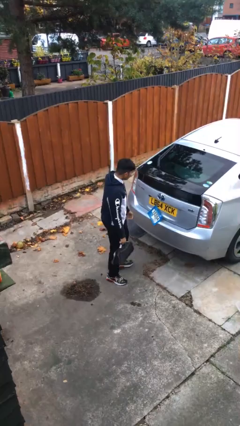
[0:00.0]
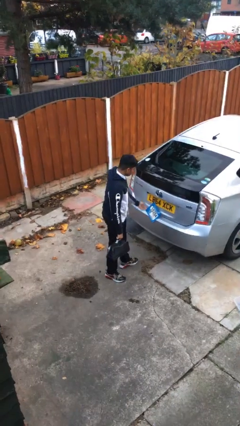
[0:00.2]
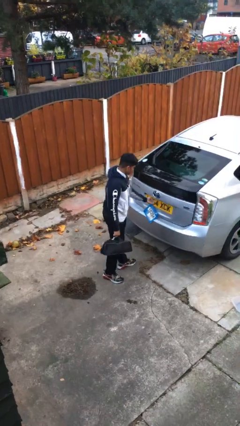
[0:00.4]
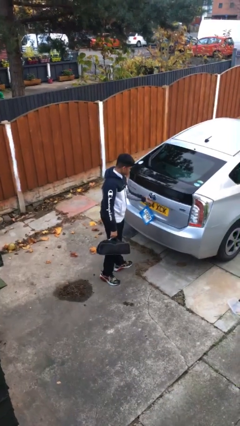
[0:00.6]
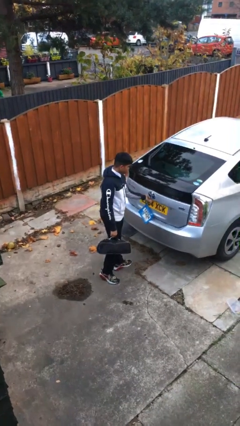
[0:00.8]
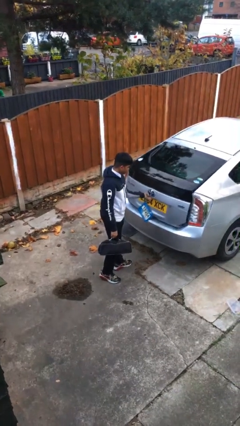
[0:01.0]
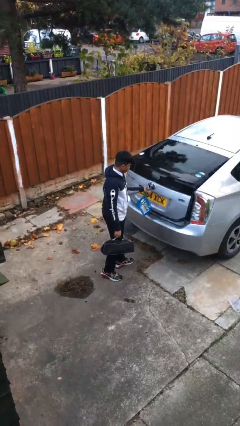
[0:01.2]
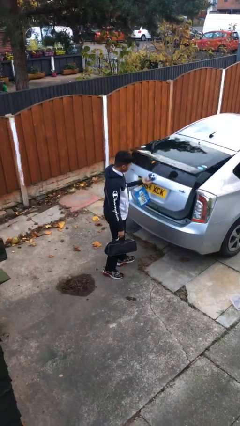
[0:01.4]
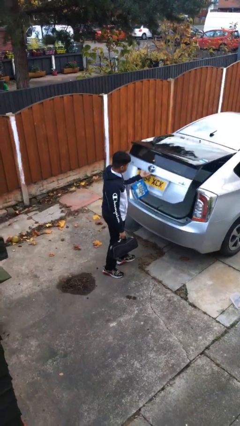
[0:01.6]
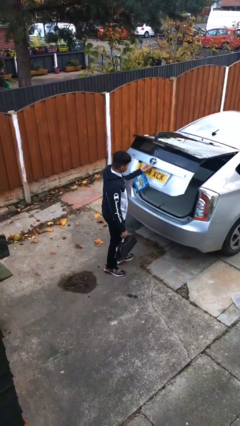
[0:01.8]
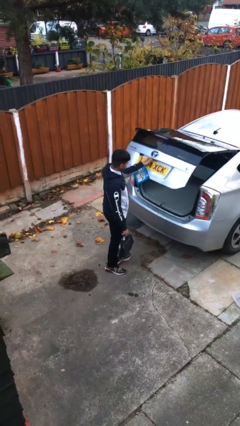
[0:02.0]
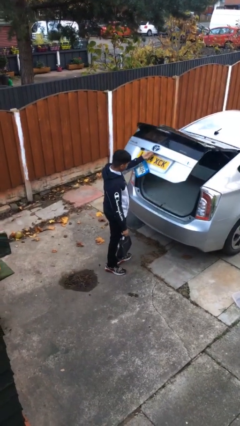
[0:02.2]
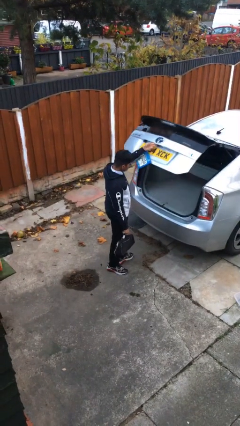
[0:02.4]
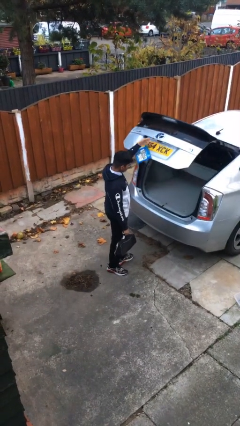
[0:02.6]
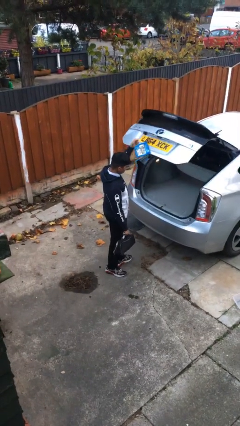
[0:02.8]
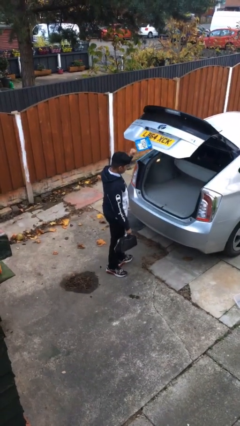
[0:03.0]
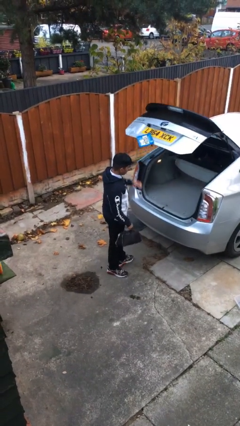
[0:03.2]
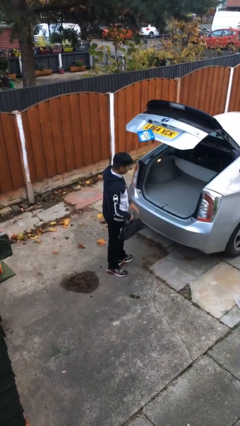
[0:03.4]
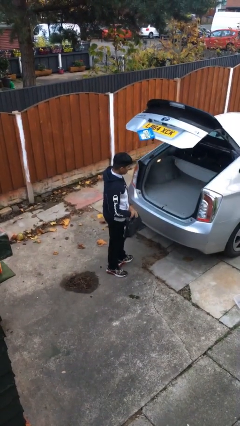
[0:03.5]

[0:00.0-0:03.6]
person opens car trunk

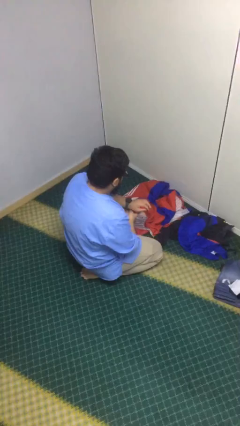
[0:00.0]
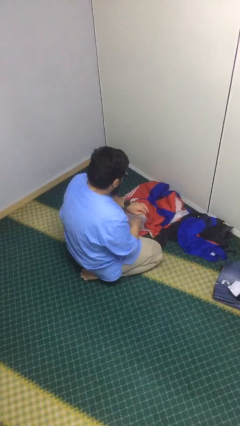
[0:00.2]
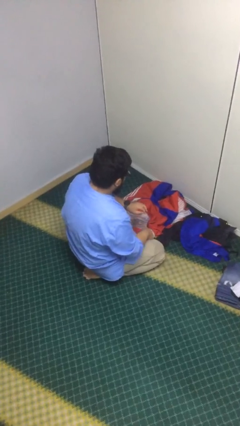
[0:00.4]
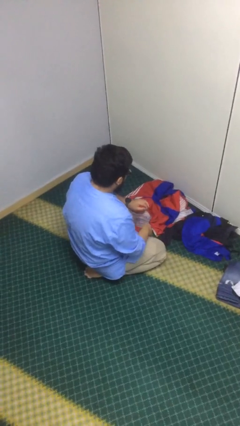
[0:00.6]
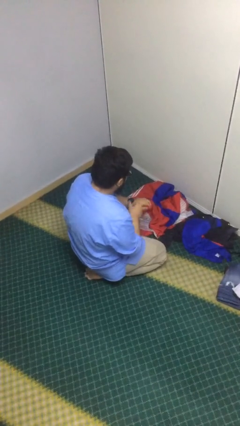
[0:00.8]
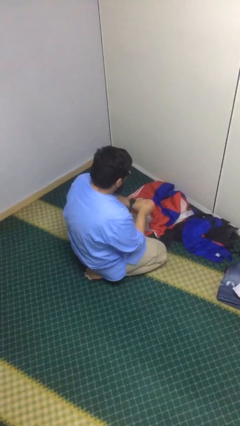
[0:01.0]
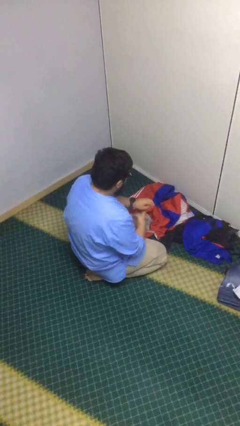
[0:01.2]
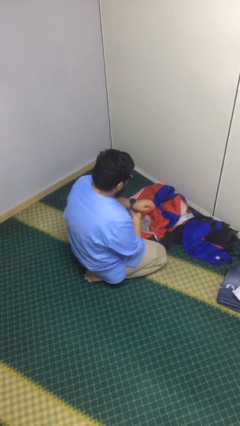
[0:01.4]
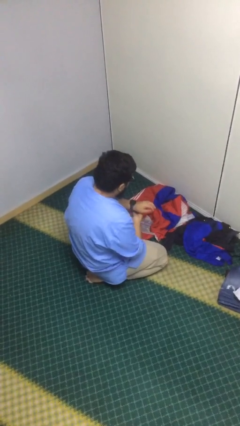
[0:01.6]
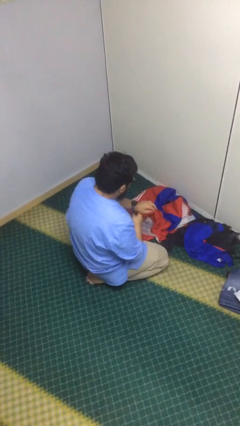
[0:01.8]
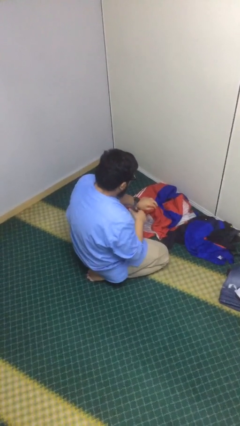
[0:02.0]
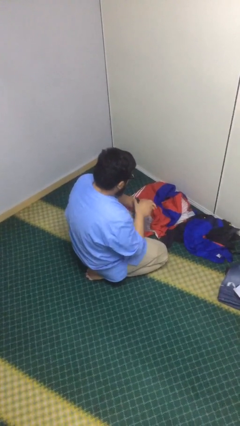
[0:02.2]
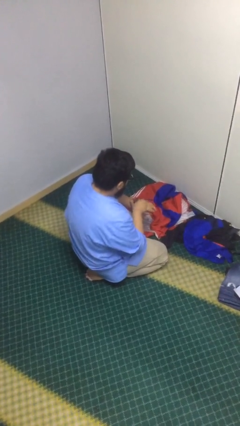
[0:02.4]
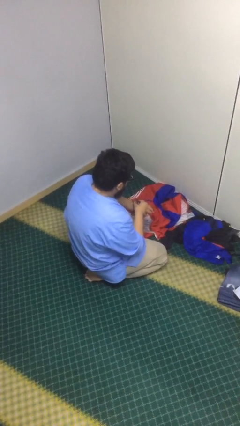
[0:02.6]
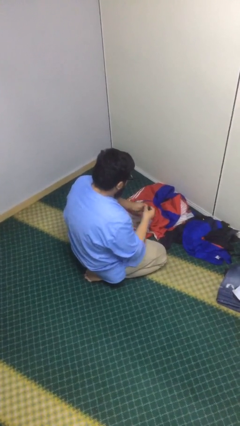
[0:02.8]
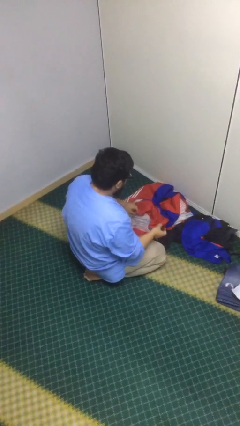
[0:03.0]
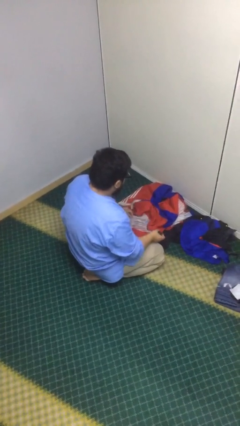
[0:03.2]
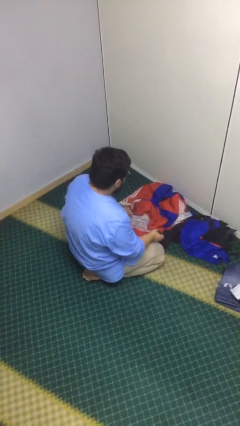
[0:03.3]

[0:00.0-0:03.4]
person takes off wristwatch

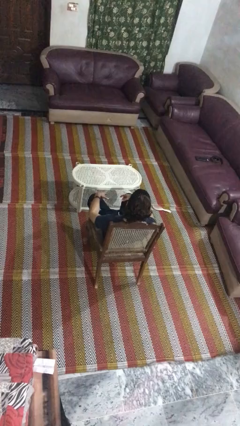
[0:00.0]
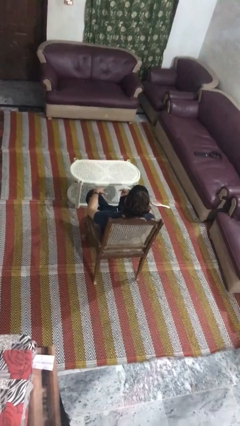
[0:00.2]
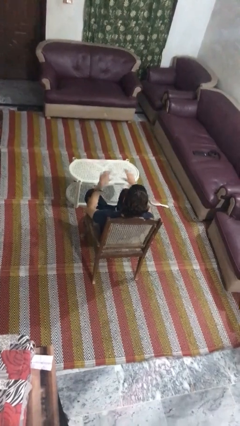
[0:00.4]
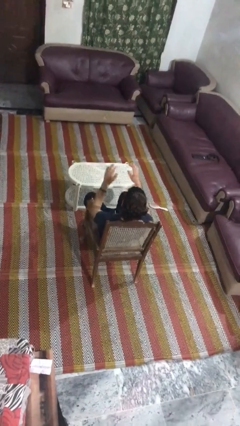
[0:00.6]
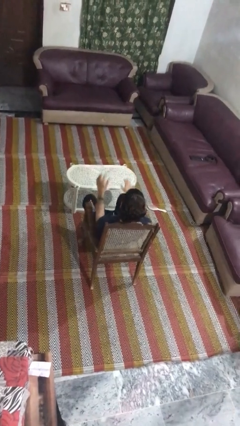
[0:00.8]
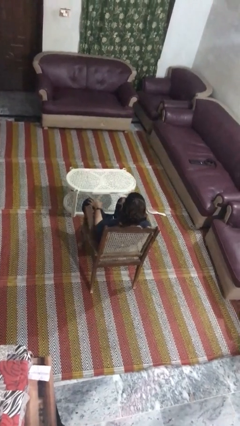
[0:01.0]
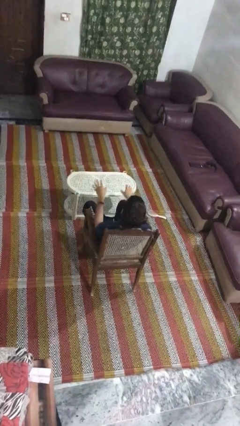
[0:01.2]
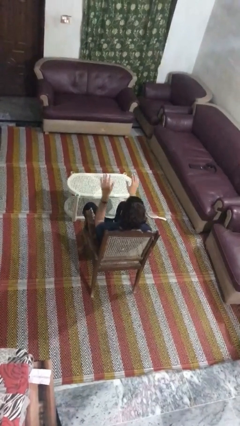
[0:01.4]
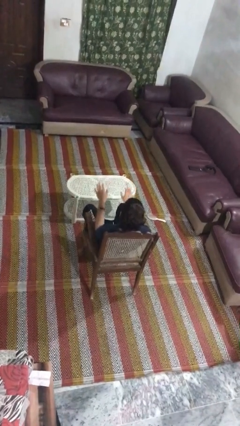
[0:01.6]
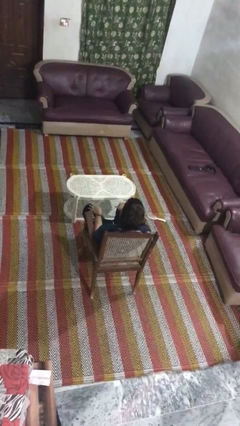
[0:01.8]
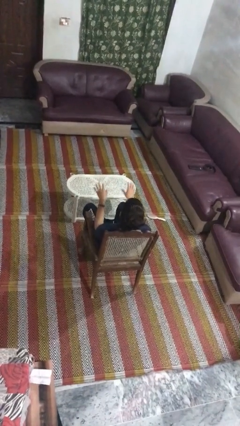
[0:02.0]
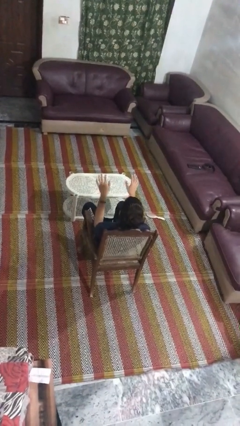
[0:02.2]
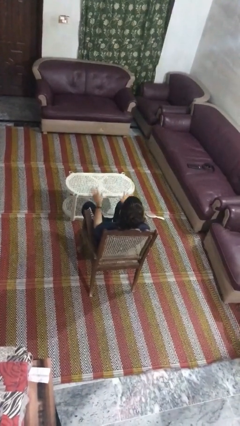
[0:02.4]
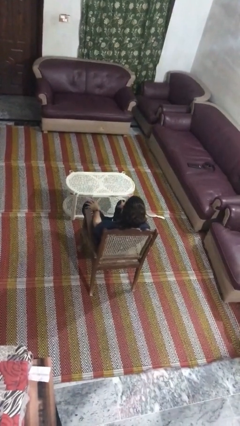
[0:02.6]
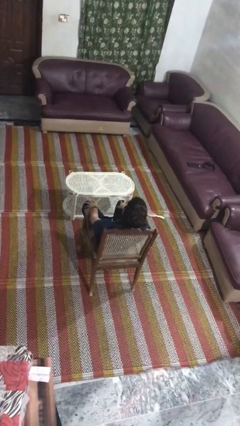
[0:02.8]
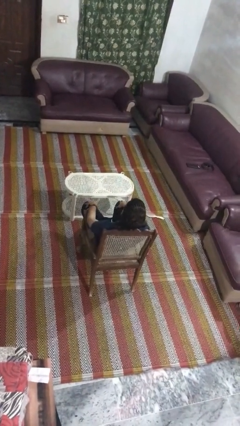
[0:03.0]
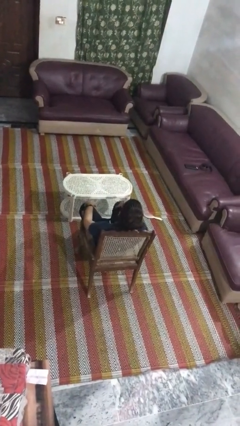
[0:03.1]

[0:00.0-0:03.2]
person slaps hands on thighs

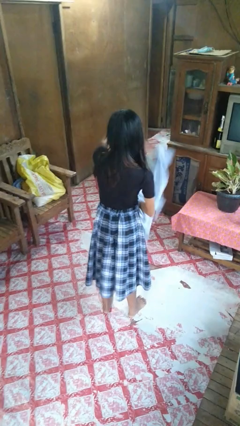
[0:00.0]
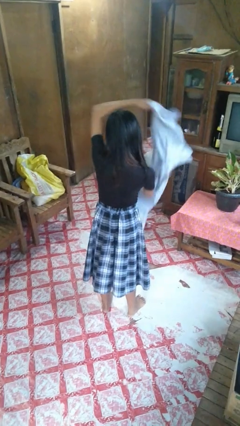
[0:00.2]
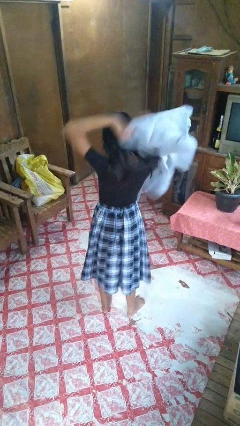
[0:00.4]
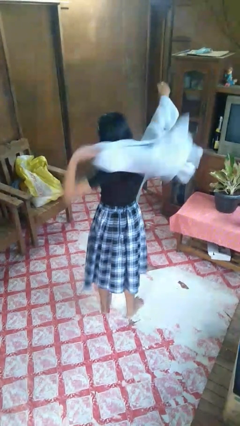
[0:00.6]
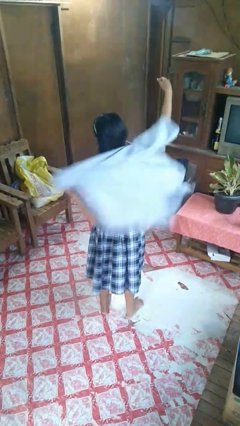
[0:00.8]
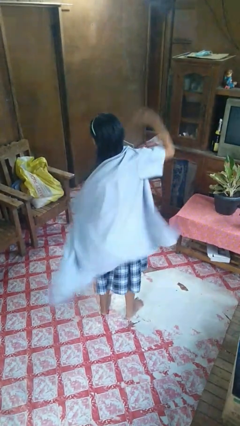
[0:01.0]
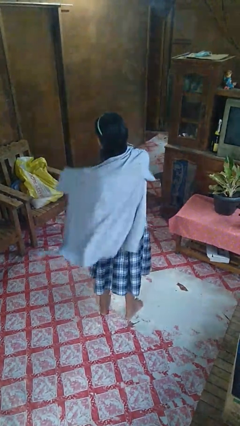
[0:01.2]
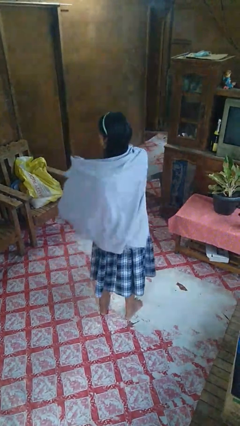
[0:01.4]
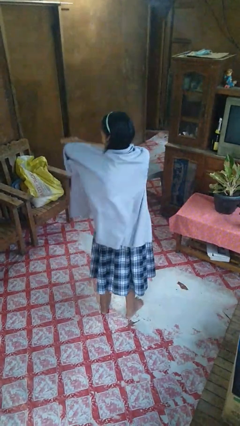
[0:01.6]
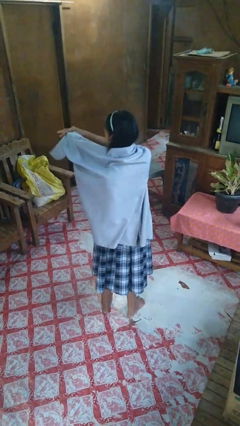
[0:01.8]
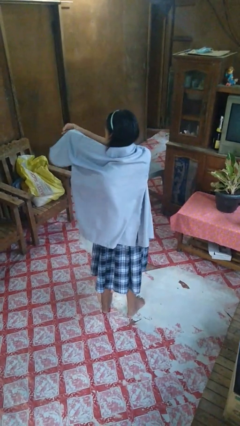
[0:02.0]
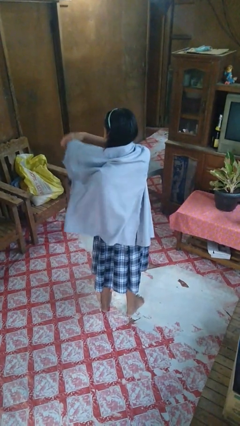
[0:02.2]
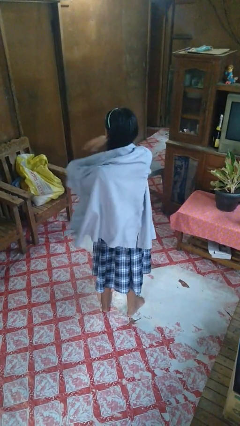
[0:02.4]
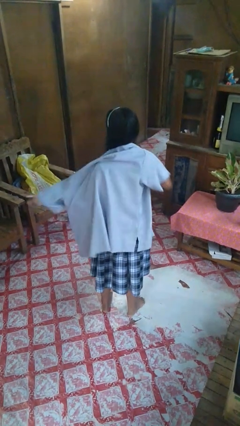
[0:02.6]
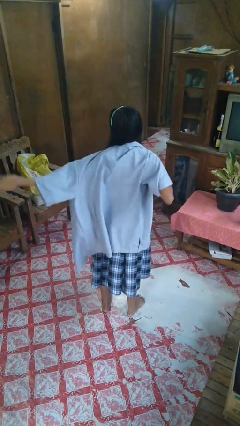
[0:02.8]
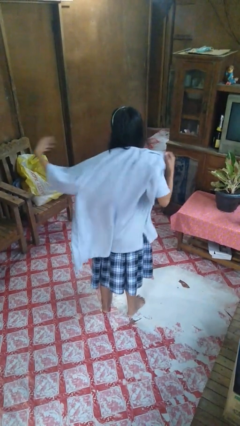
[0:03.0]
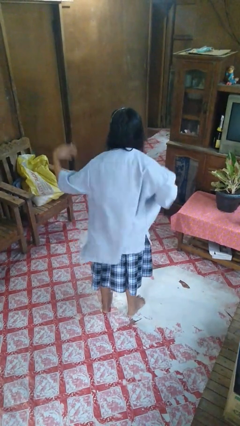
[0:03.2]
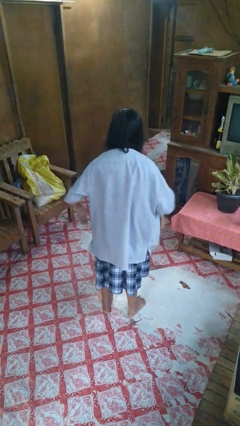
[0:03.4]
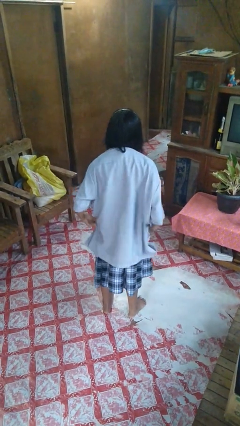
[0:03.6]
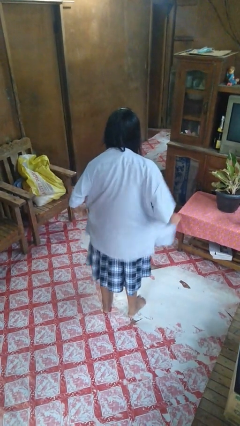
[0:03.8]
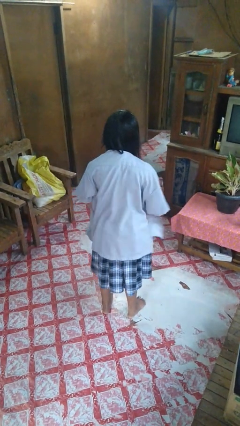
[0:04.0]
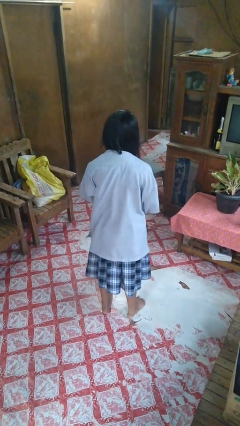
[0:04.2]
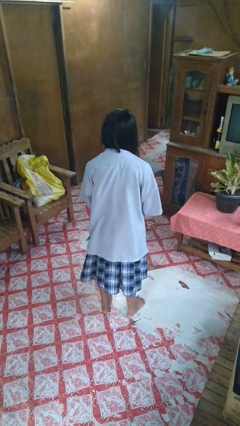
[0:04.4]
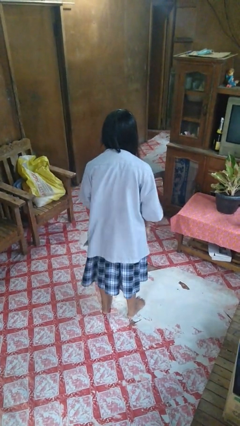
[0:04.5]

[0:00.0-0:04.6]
person puts on shirt

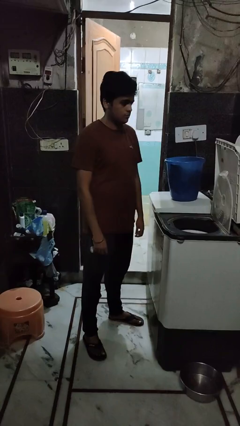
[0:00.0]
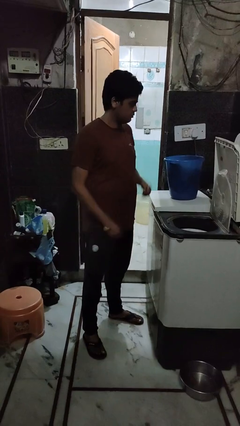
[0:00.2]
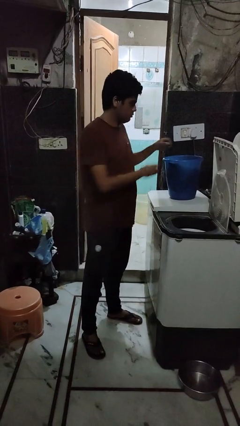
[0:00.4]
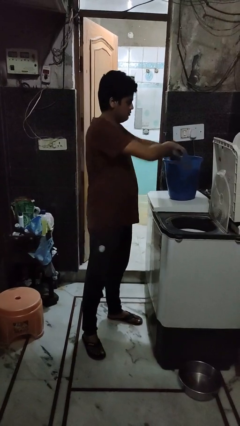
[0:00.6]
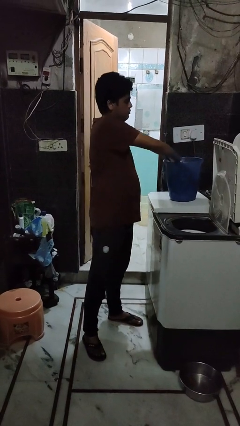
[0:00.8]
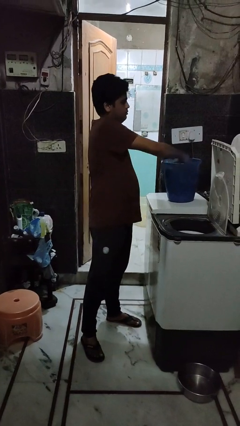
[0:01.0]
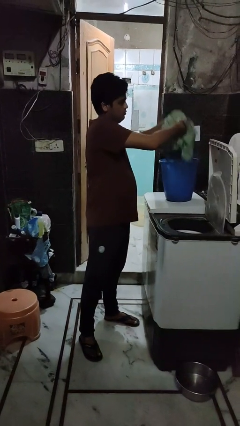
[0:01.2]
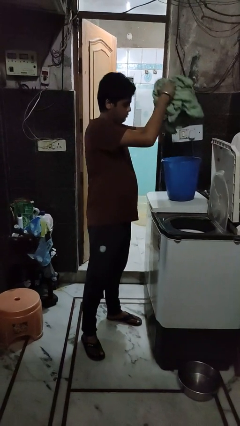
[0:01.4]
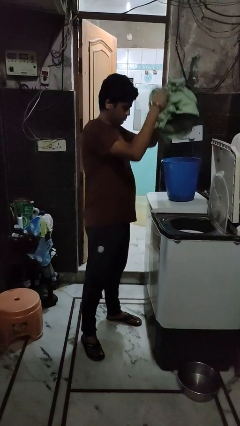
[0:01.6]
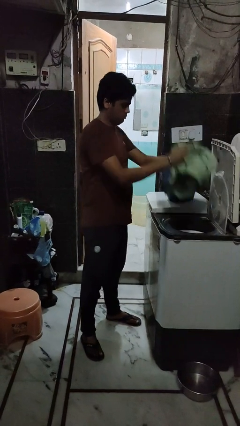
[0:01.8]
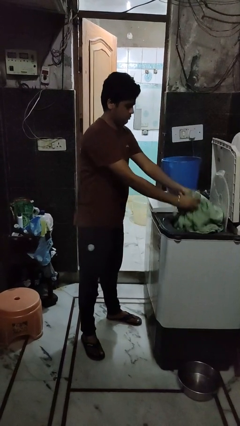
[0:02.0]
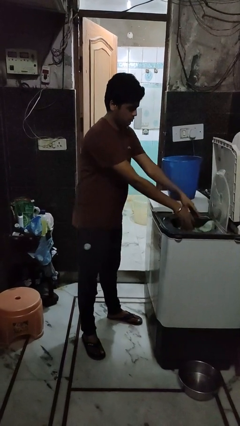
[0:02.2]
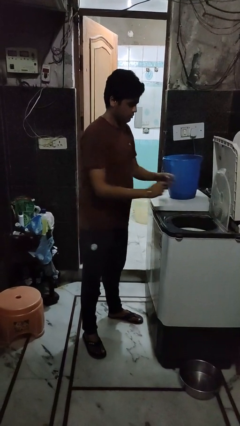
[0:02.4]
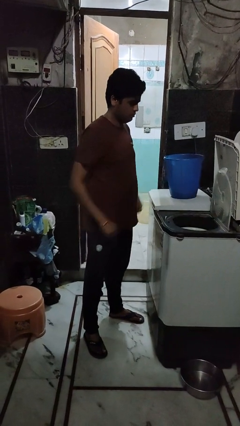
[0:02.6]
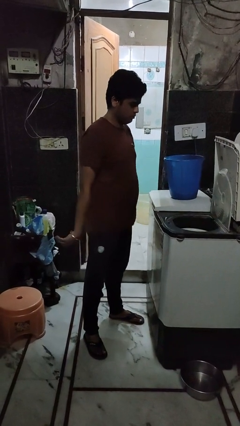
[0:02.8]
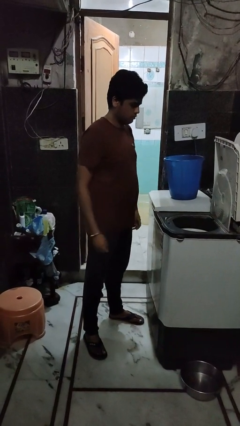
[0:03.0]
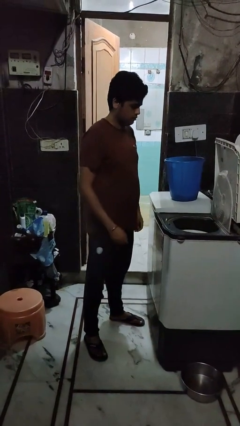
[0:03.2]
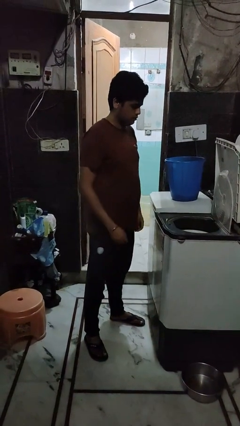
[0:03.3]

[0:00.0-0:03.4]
person loads dryer
